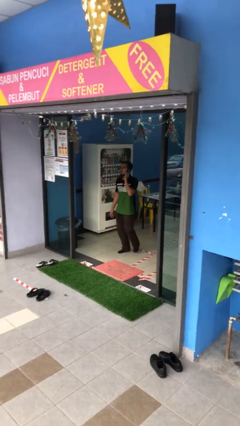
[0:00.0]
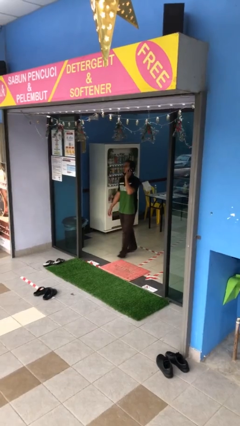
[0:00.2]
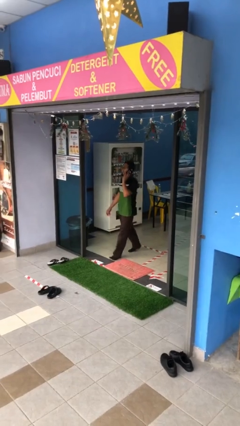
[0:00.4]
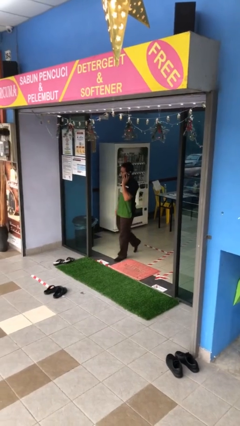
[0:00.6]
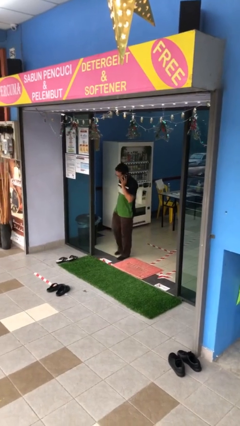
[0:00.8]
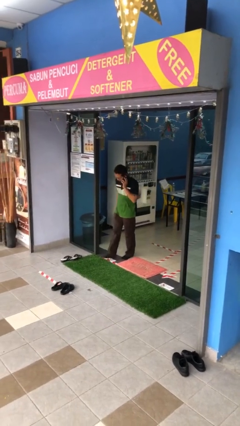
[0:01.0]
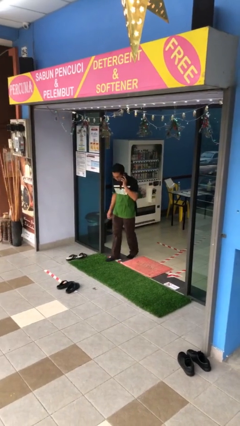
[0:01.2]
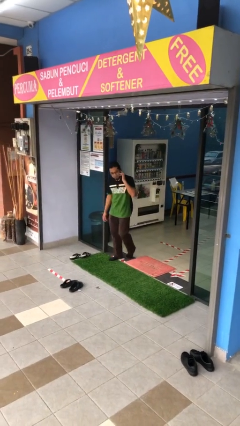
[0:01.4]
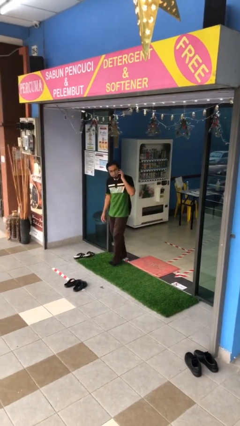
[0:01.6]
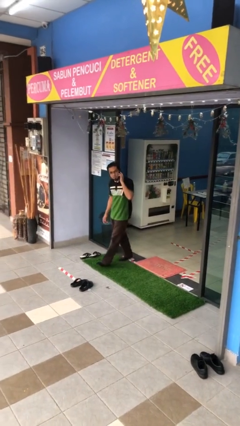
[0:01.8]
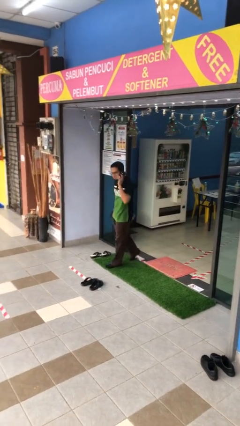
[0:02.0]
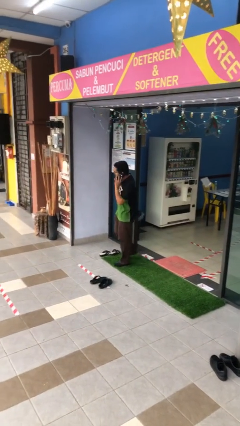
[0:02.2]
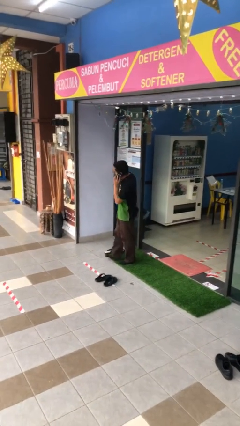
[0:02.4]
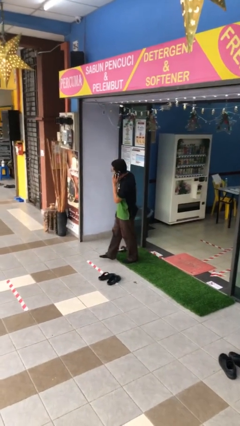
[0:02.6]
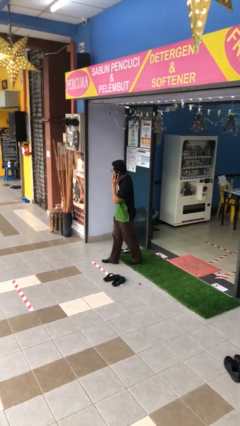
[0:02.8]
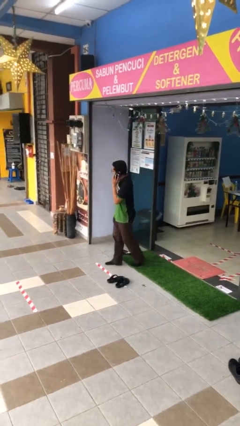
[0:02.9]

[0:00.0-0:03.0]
person enters scene through structure

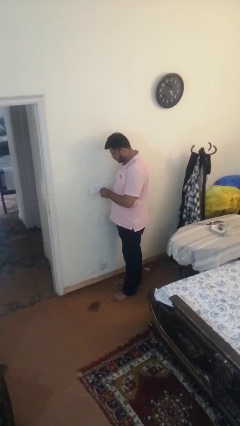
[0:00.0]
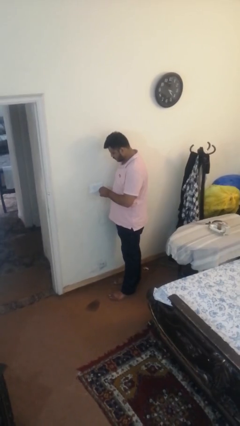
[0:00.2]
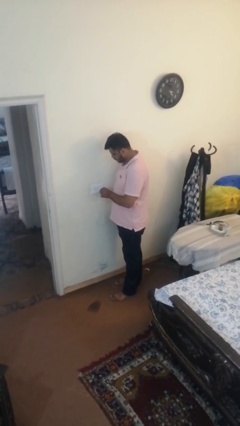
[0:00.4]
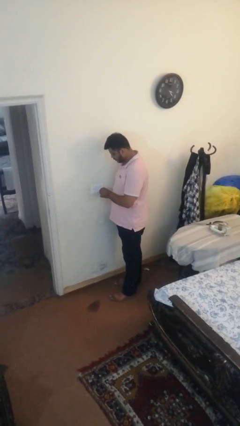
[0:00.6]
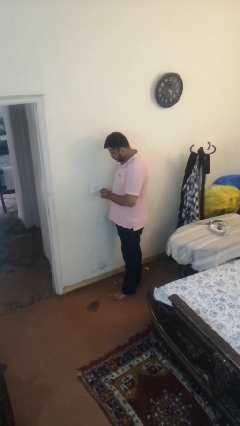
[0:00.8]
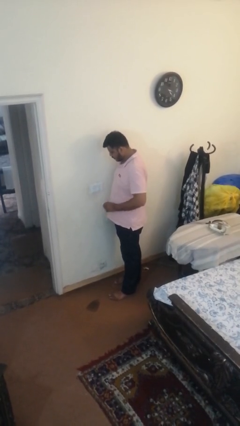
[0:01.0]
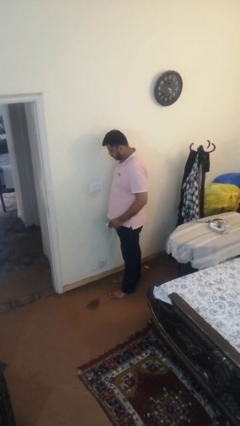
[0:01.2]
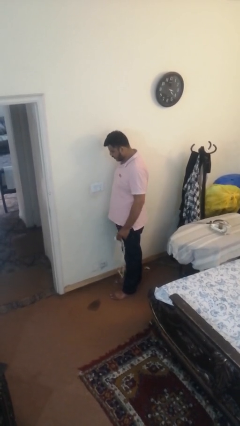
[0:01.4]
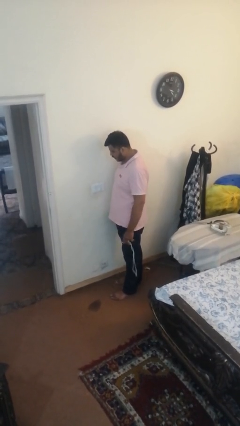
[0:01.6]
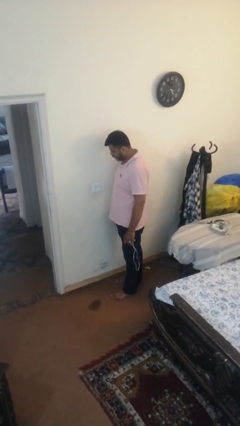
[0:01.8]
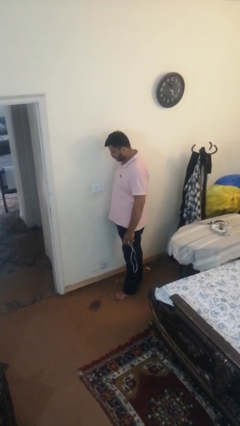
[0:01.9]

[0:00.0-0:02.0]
person unplugs from electrical socket

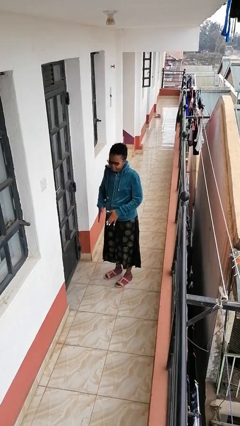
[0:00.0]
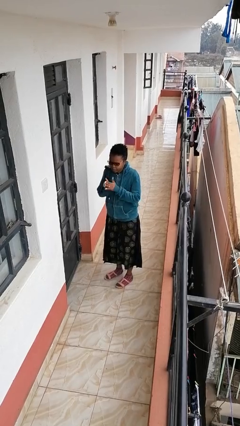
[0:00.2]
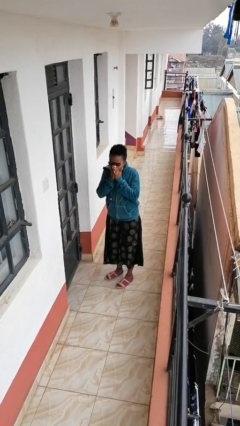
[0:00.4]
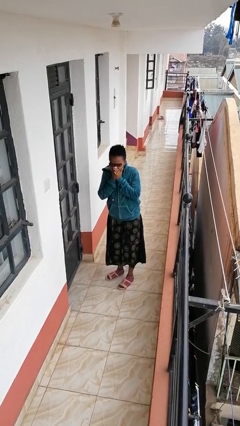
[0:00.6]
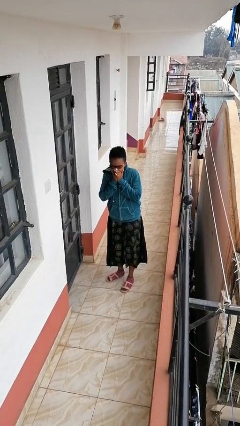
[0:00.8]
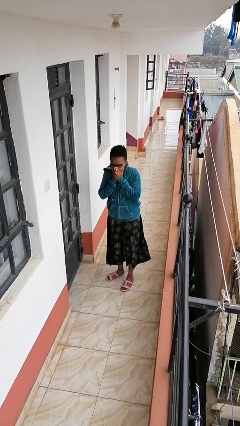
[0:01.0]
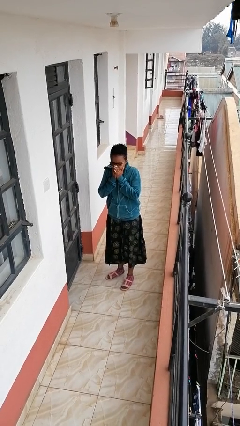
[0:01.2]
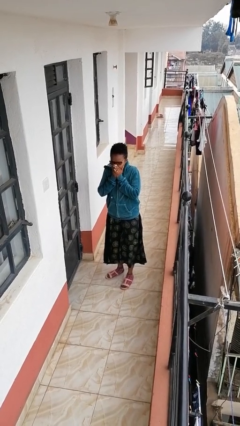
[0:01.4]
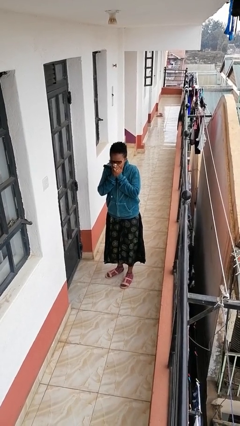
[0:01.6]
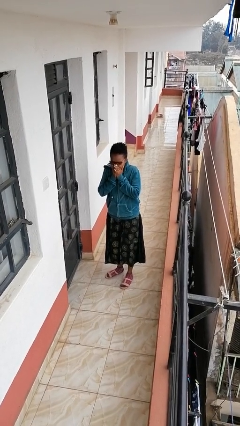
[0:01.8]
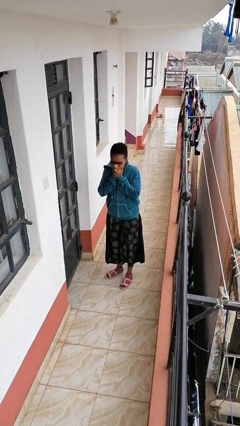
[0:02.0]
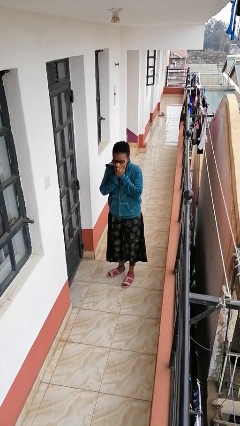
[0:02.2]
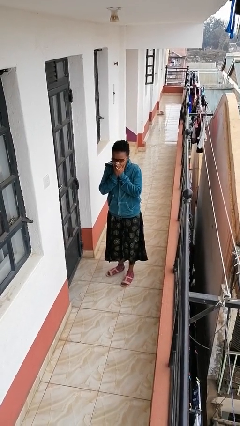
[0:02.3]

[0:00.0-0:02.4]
person blows into hands

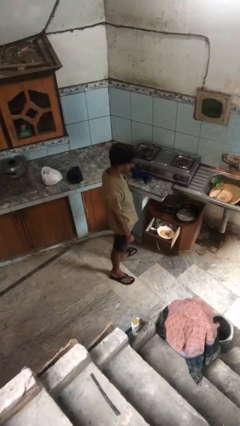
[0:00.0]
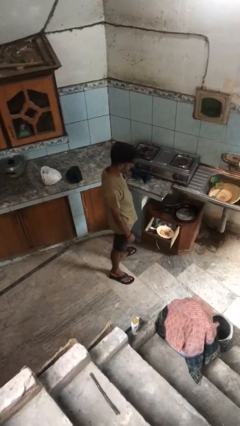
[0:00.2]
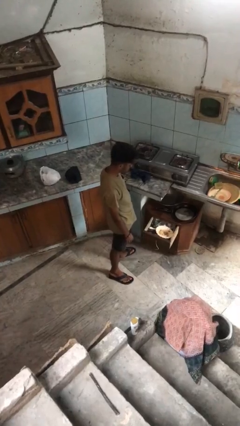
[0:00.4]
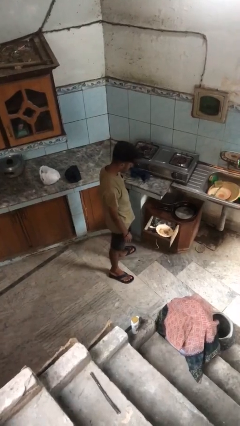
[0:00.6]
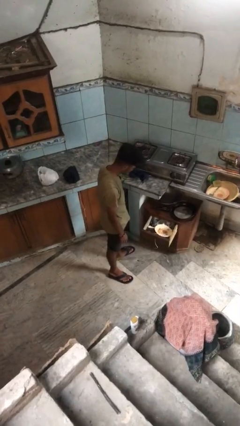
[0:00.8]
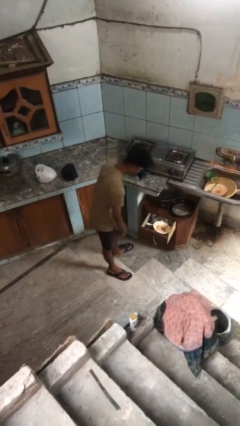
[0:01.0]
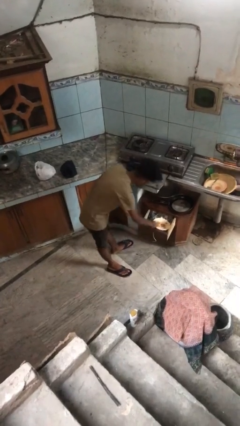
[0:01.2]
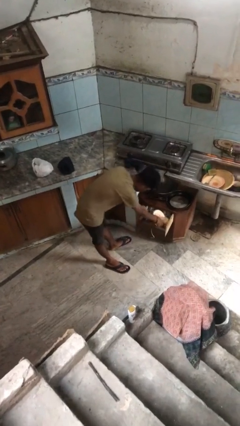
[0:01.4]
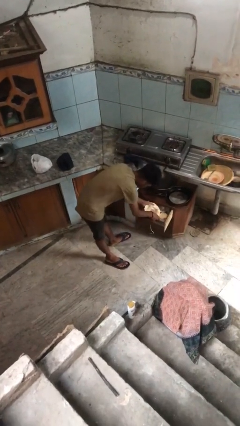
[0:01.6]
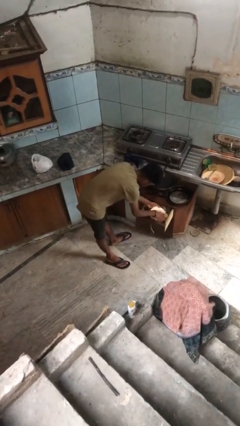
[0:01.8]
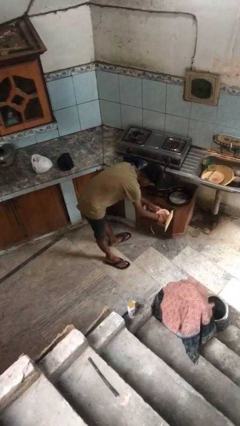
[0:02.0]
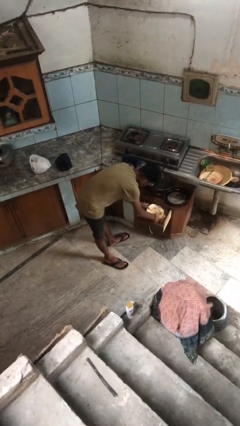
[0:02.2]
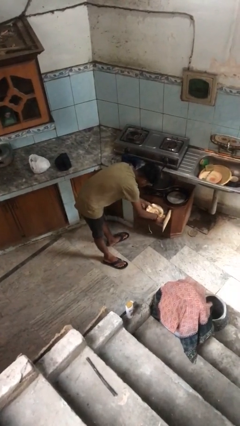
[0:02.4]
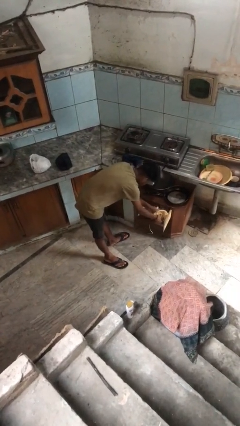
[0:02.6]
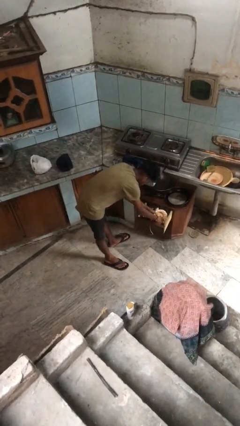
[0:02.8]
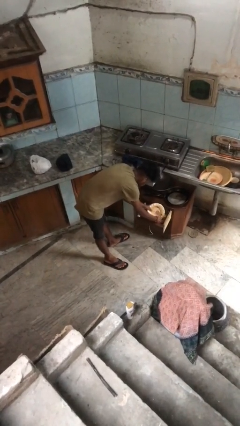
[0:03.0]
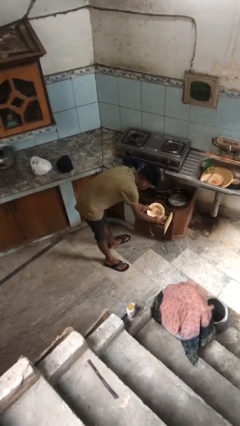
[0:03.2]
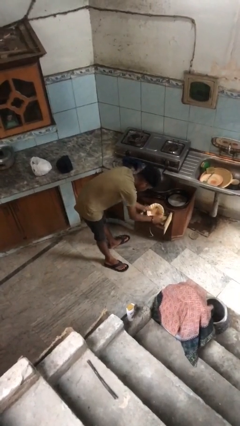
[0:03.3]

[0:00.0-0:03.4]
person searches in kitchen drawer

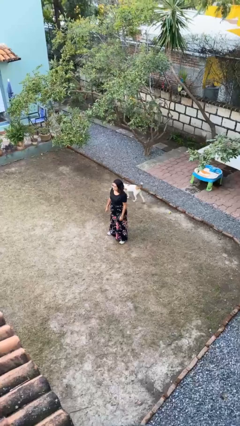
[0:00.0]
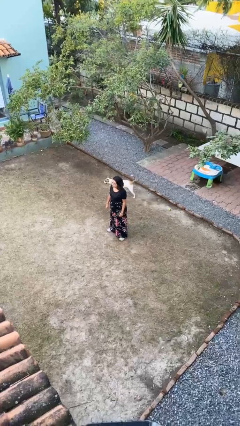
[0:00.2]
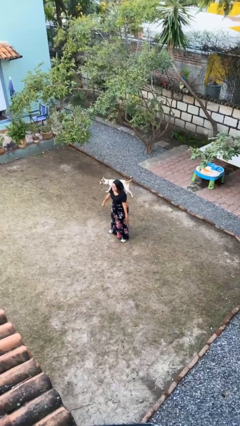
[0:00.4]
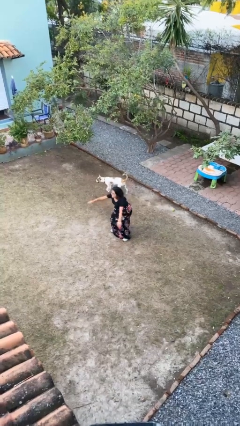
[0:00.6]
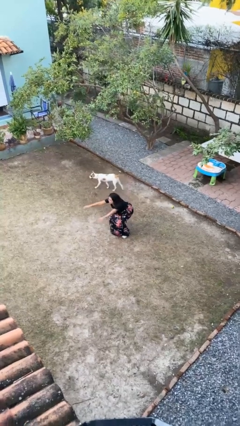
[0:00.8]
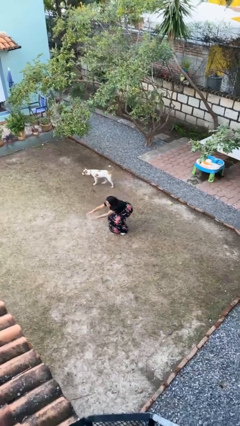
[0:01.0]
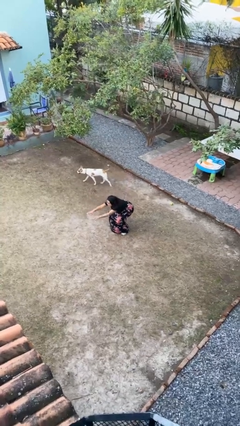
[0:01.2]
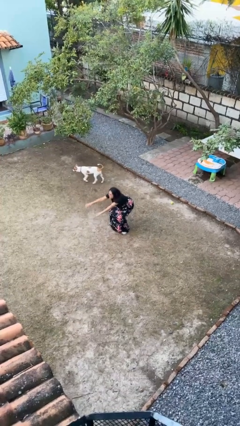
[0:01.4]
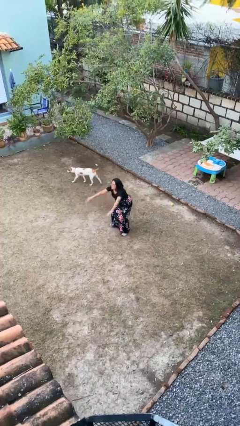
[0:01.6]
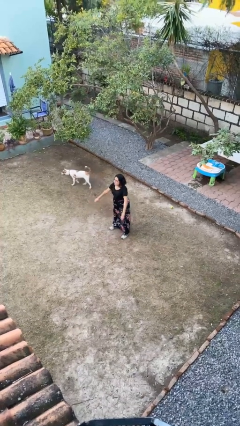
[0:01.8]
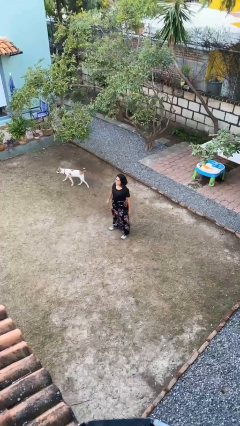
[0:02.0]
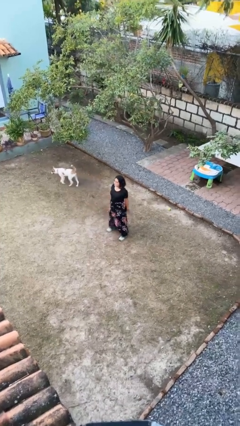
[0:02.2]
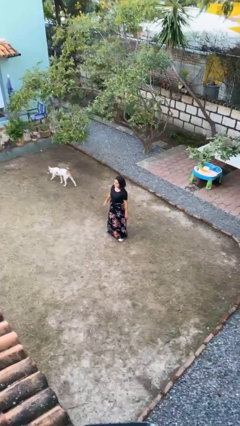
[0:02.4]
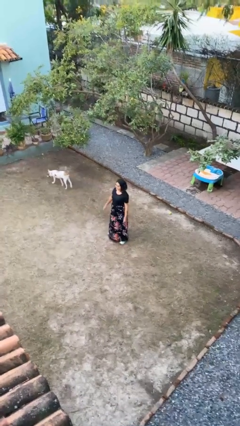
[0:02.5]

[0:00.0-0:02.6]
person exercises with situp

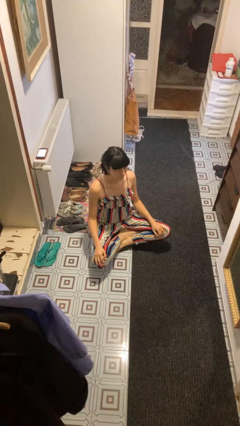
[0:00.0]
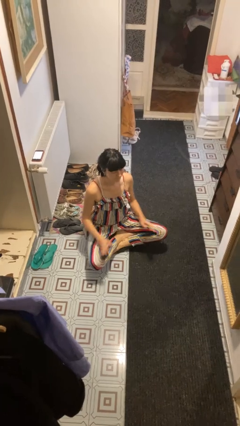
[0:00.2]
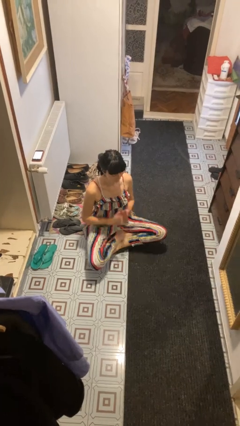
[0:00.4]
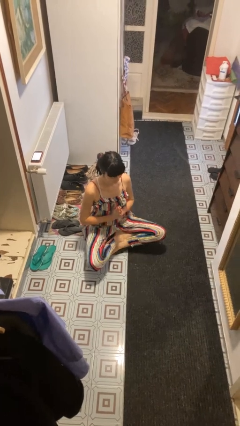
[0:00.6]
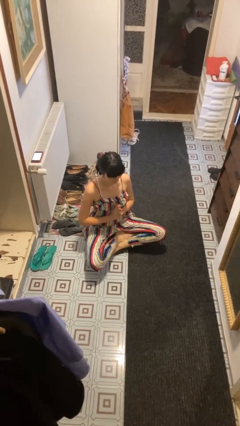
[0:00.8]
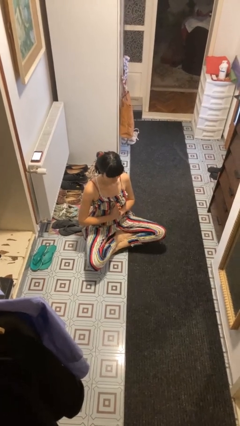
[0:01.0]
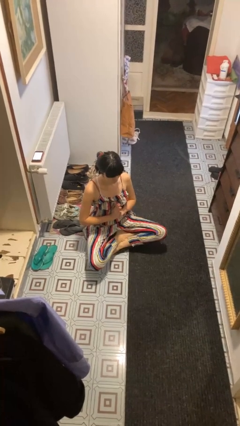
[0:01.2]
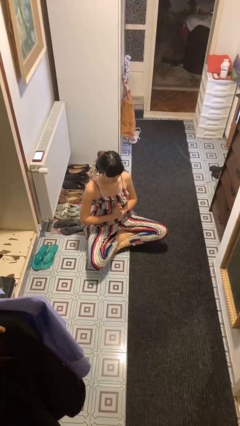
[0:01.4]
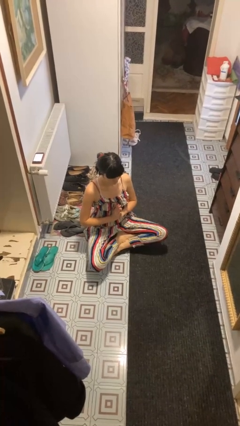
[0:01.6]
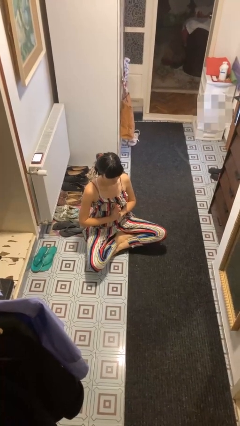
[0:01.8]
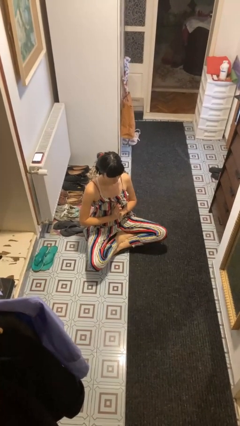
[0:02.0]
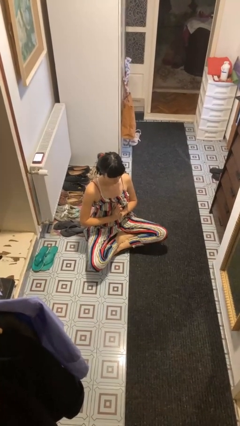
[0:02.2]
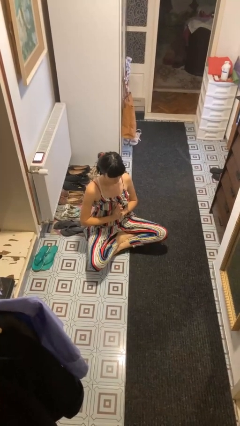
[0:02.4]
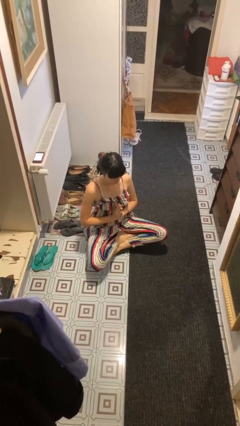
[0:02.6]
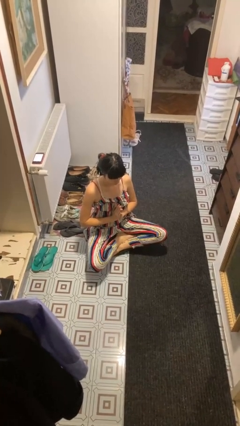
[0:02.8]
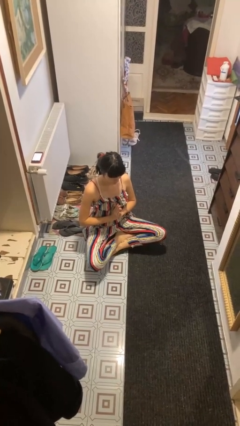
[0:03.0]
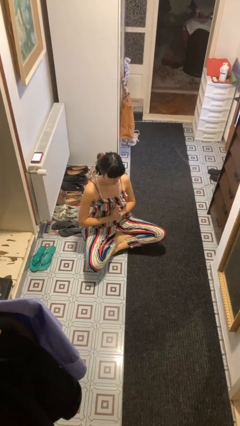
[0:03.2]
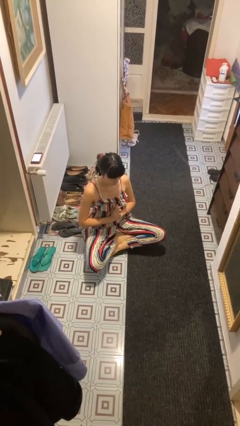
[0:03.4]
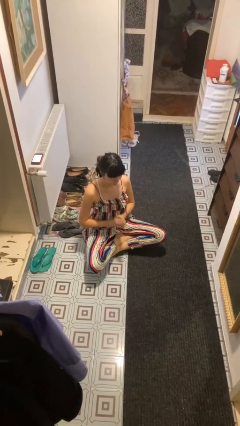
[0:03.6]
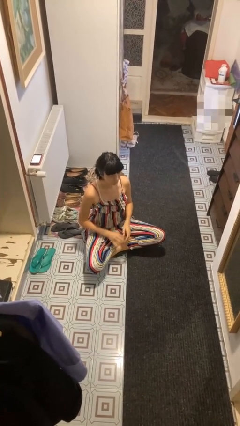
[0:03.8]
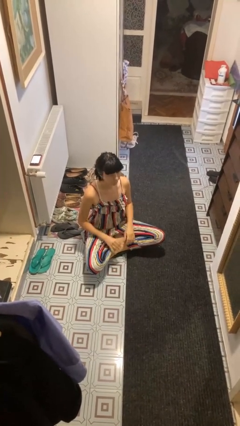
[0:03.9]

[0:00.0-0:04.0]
person prays
